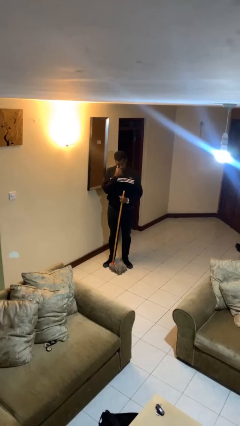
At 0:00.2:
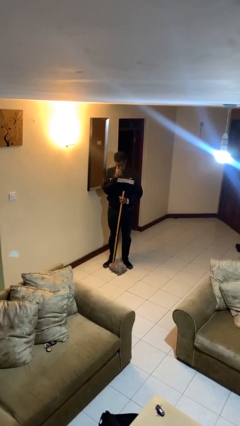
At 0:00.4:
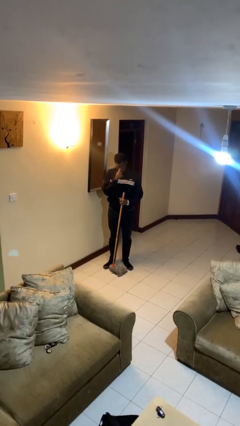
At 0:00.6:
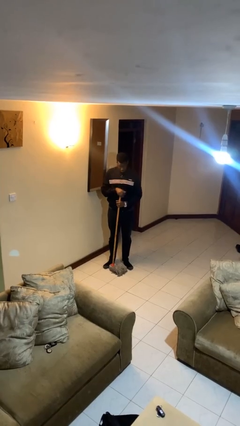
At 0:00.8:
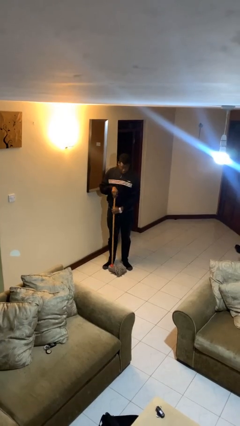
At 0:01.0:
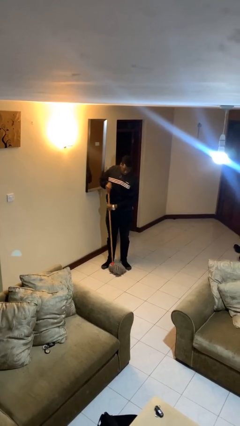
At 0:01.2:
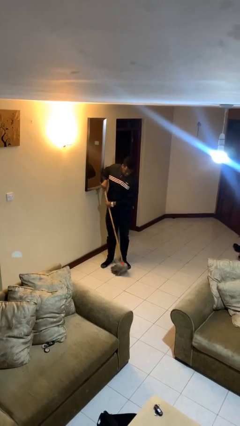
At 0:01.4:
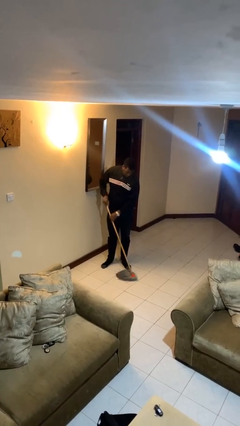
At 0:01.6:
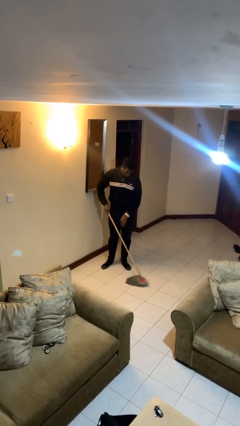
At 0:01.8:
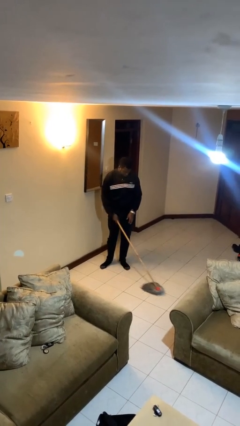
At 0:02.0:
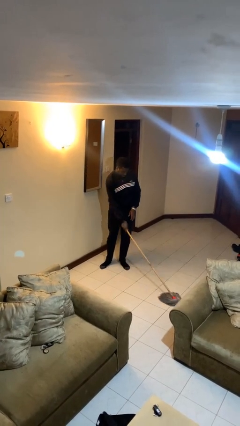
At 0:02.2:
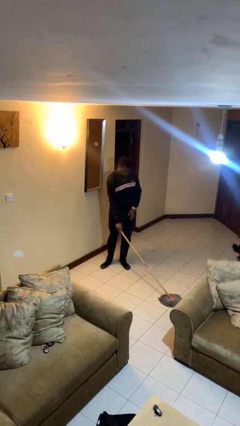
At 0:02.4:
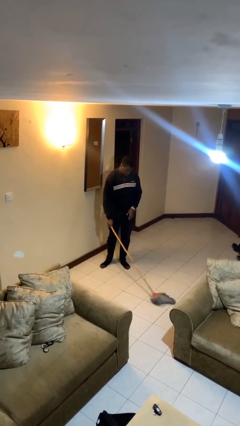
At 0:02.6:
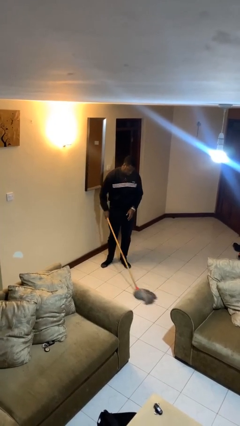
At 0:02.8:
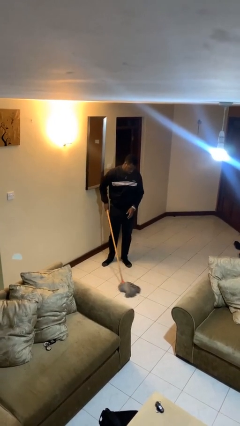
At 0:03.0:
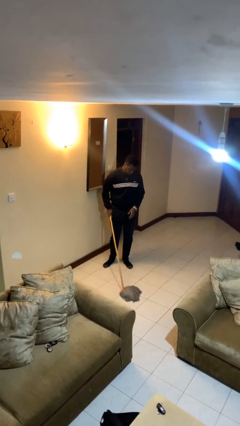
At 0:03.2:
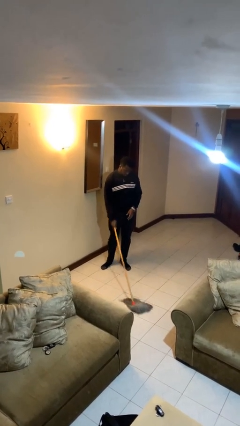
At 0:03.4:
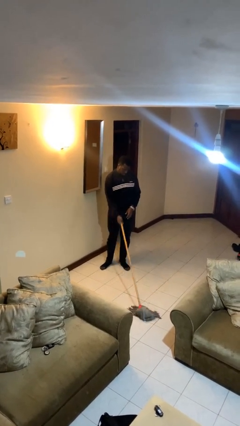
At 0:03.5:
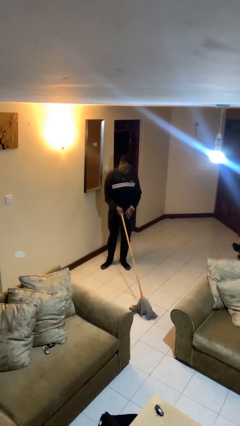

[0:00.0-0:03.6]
person mops

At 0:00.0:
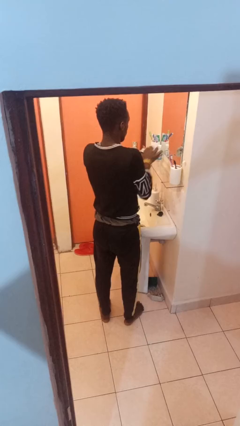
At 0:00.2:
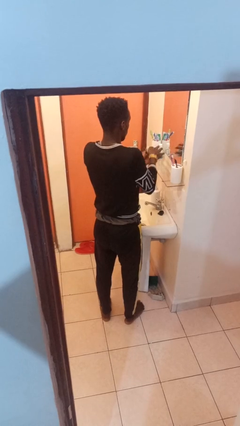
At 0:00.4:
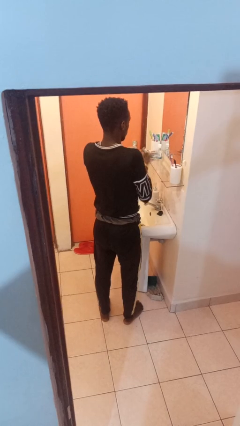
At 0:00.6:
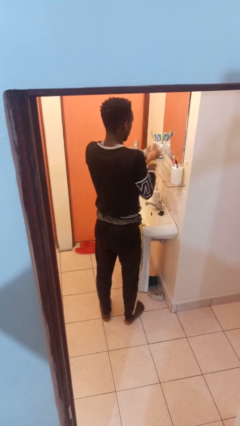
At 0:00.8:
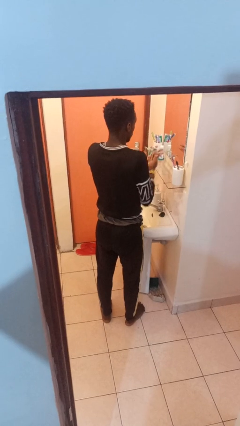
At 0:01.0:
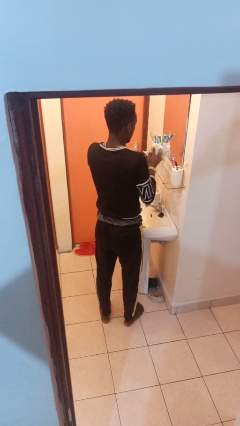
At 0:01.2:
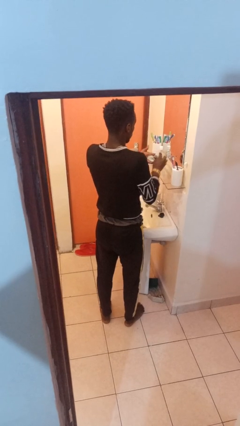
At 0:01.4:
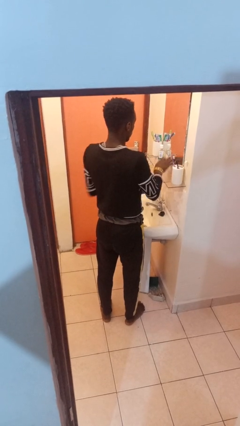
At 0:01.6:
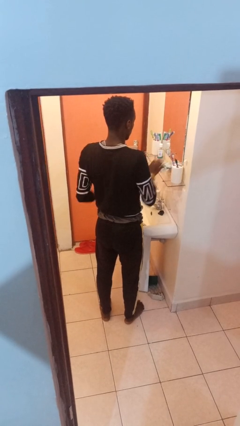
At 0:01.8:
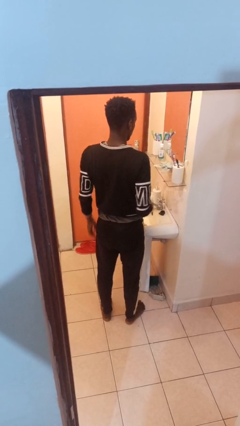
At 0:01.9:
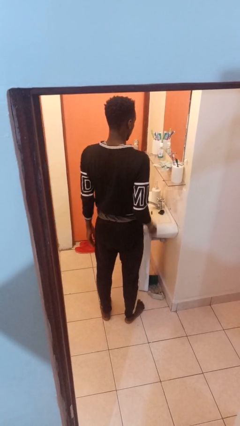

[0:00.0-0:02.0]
person dries hands with towel

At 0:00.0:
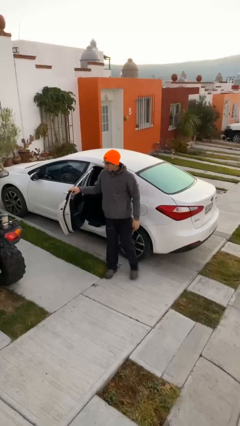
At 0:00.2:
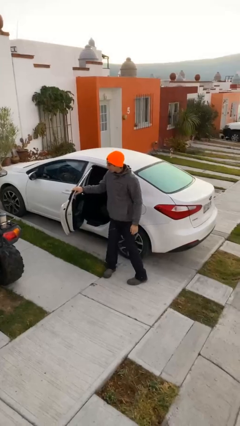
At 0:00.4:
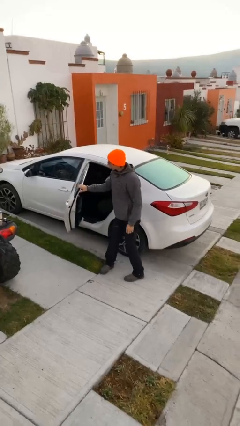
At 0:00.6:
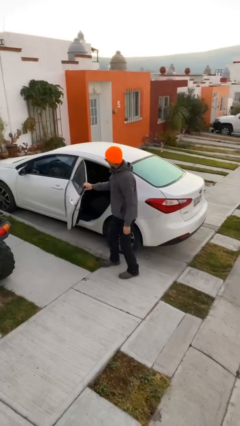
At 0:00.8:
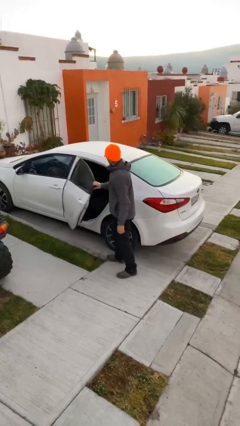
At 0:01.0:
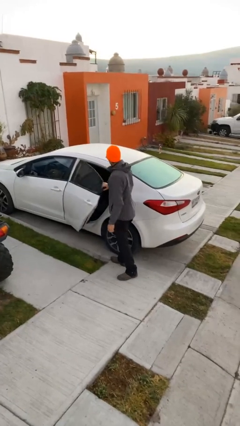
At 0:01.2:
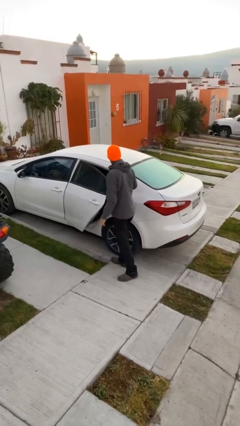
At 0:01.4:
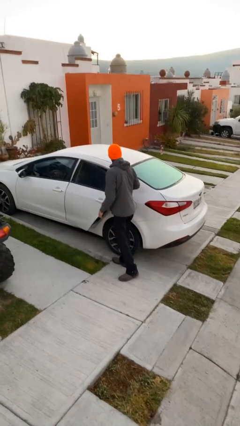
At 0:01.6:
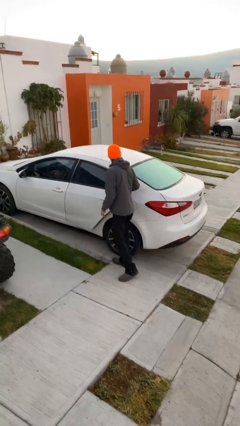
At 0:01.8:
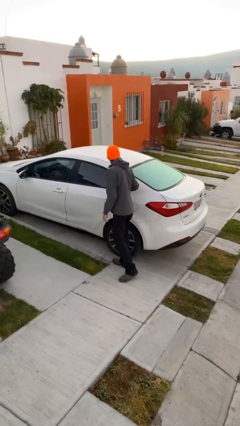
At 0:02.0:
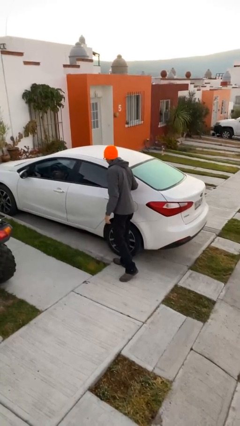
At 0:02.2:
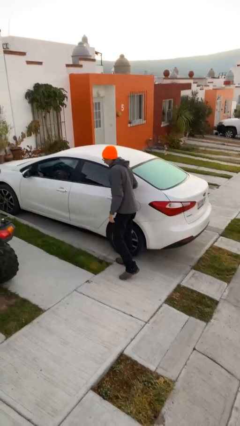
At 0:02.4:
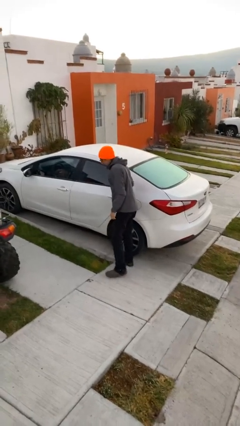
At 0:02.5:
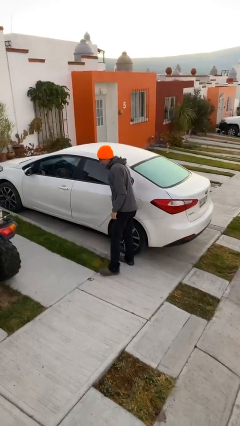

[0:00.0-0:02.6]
person closes car door

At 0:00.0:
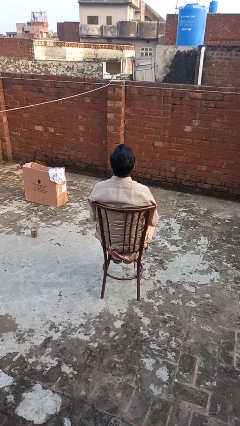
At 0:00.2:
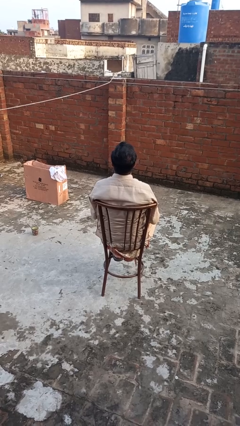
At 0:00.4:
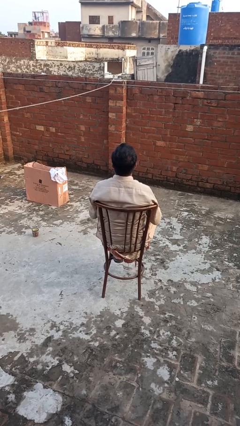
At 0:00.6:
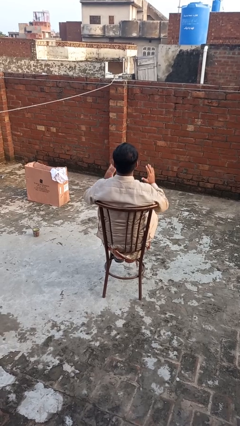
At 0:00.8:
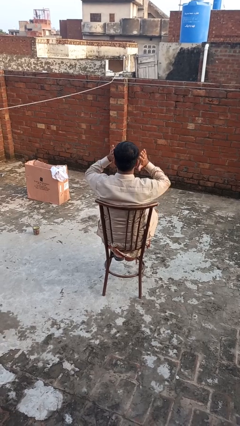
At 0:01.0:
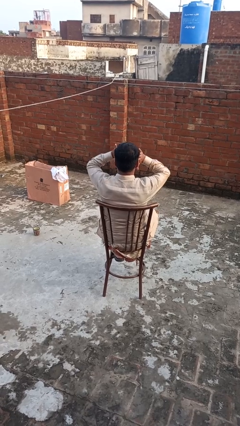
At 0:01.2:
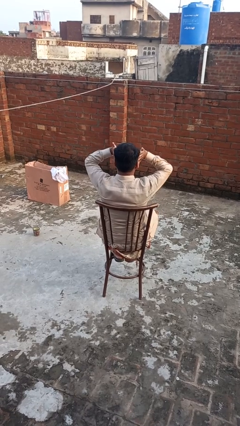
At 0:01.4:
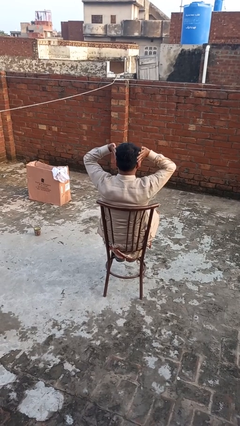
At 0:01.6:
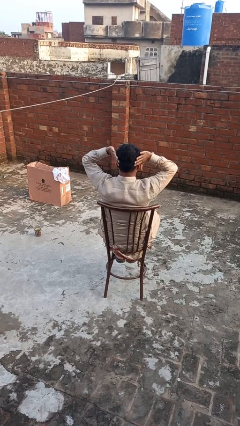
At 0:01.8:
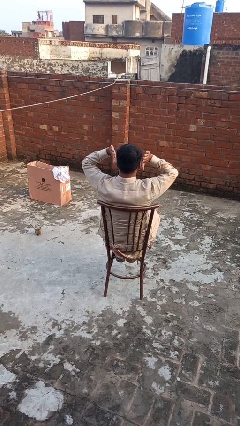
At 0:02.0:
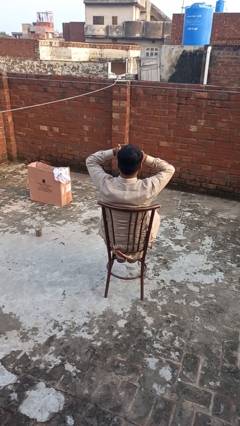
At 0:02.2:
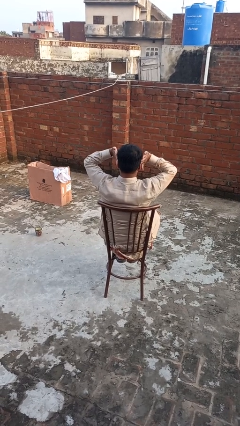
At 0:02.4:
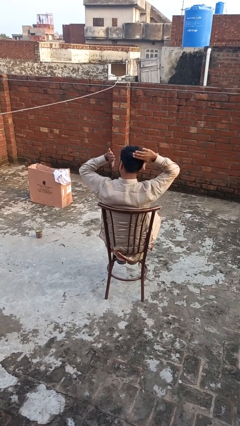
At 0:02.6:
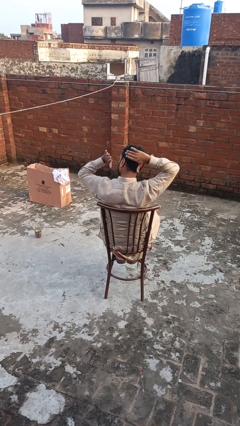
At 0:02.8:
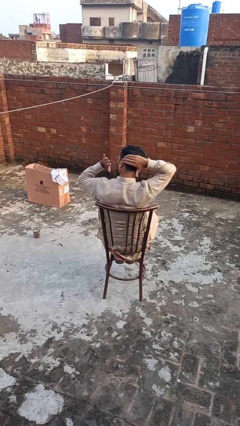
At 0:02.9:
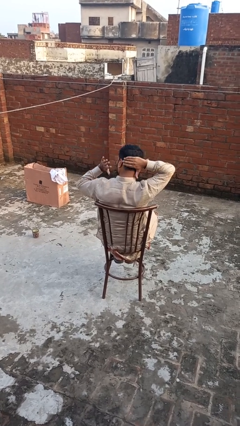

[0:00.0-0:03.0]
person strokes hair

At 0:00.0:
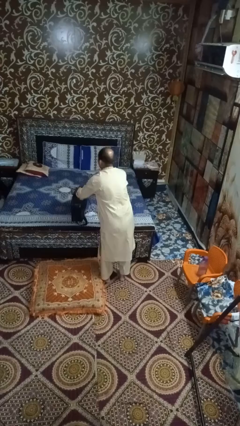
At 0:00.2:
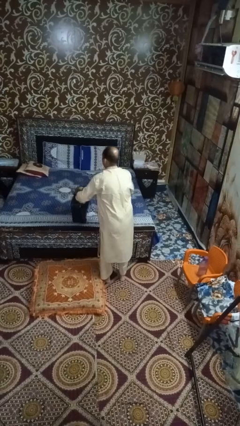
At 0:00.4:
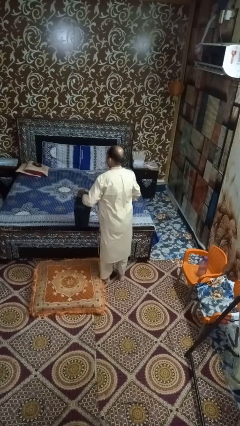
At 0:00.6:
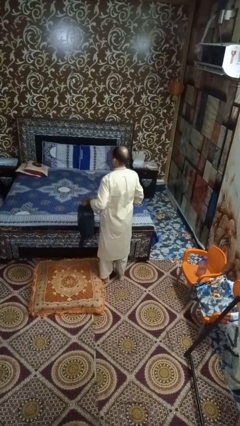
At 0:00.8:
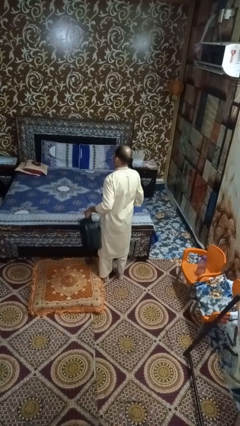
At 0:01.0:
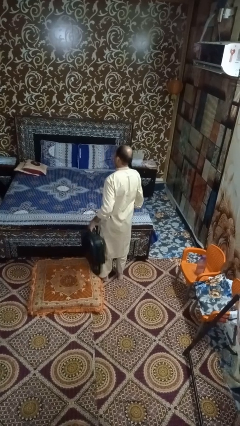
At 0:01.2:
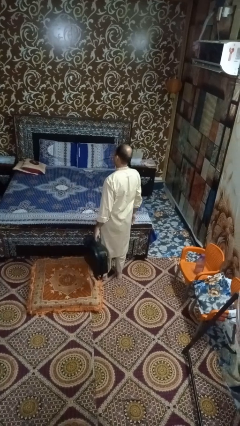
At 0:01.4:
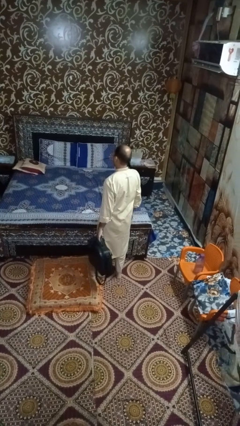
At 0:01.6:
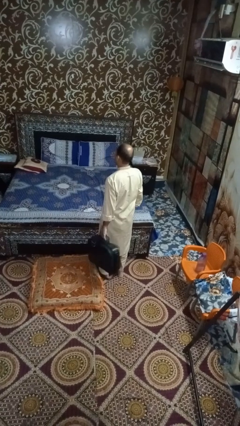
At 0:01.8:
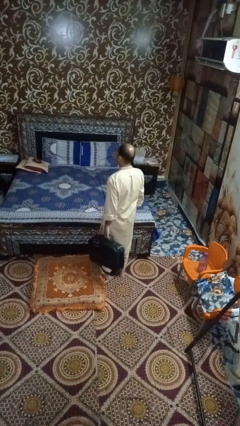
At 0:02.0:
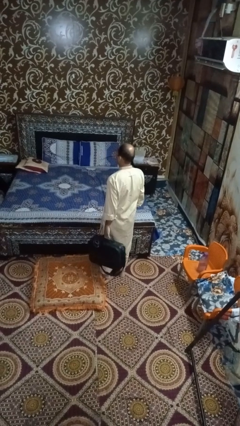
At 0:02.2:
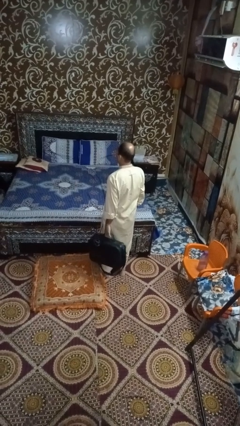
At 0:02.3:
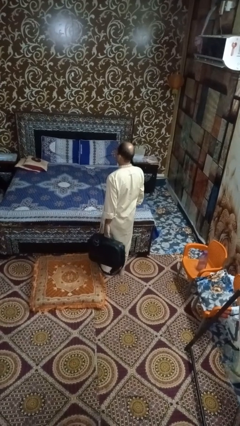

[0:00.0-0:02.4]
person puts down object on bed

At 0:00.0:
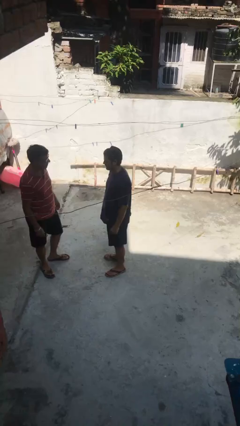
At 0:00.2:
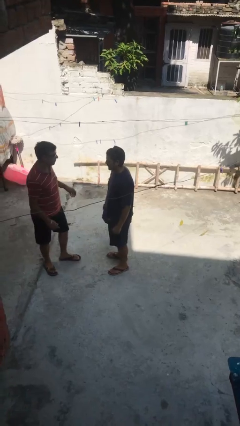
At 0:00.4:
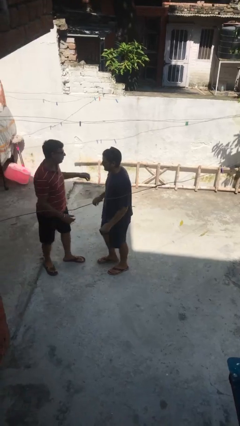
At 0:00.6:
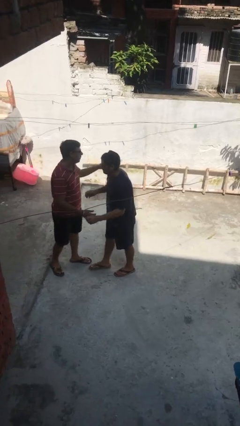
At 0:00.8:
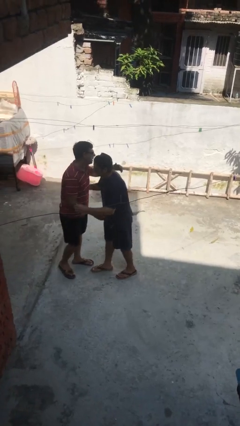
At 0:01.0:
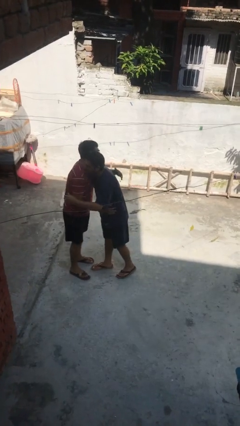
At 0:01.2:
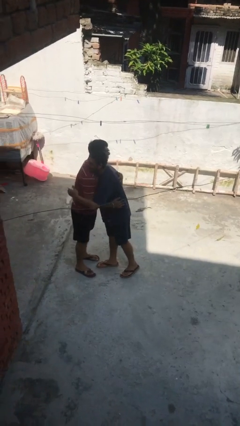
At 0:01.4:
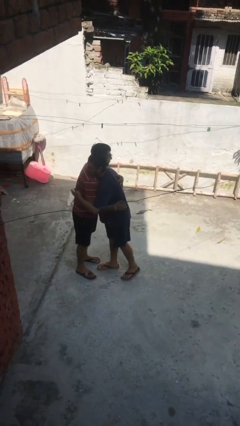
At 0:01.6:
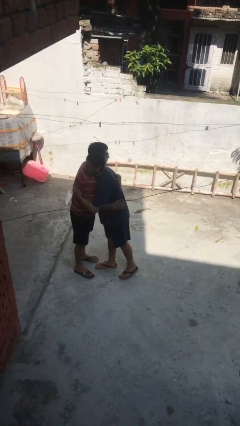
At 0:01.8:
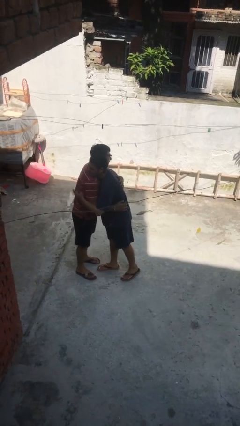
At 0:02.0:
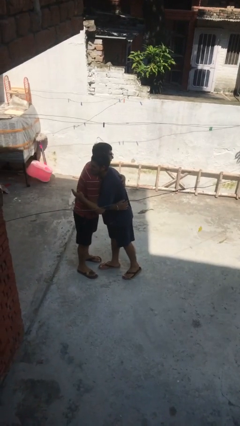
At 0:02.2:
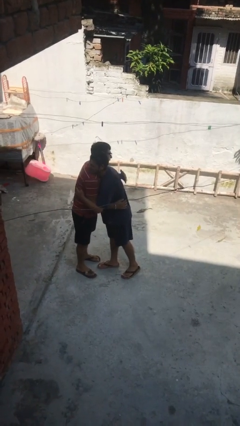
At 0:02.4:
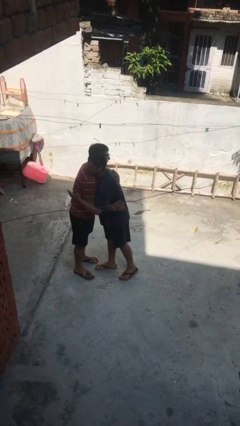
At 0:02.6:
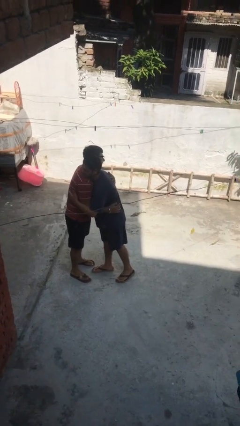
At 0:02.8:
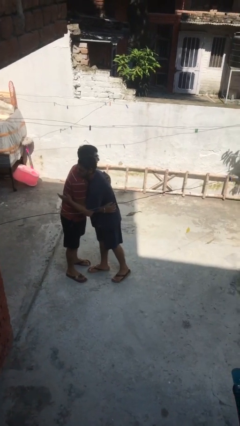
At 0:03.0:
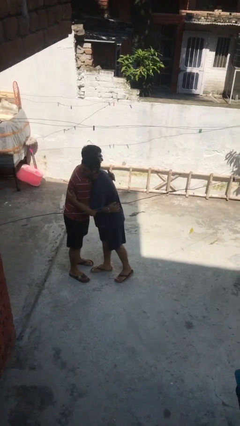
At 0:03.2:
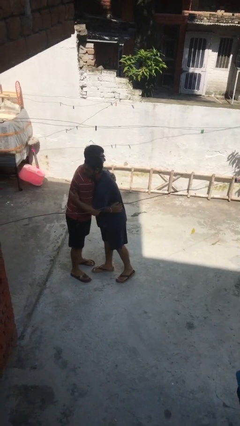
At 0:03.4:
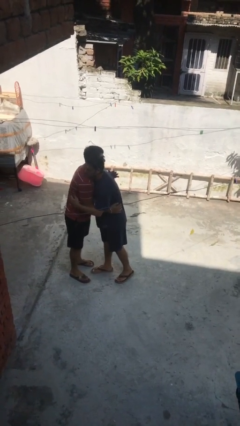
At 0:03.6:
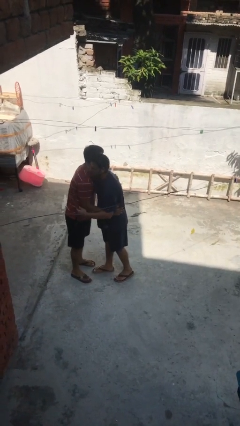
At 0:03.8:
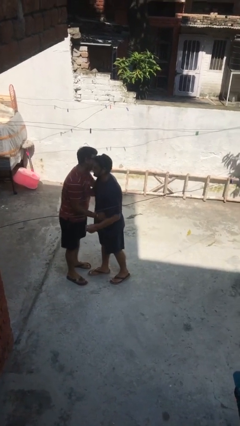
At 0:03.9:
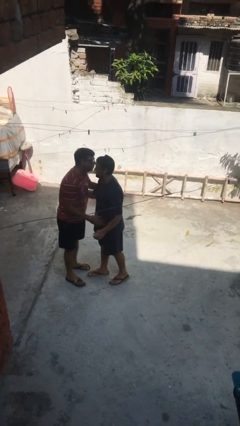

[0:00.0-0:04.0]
person embraces person
